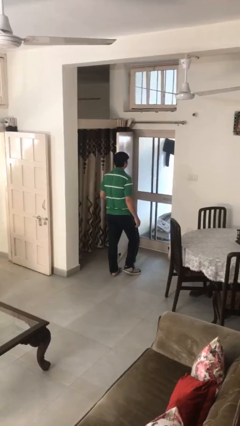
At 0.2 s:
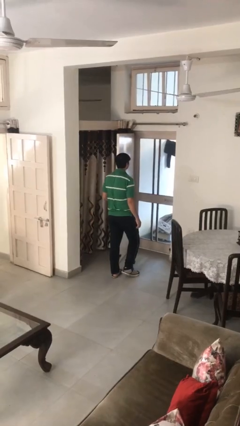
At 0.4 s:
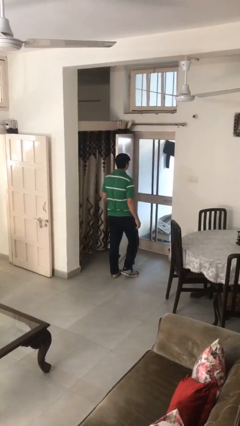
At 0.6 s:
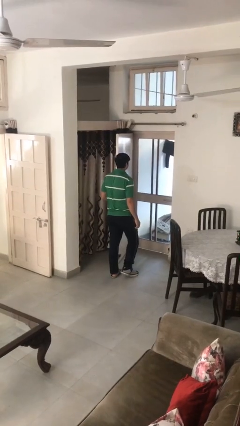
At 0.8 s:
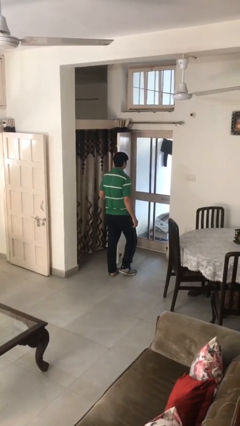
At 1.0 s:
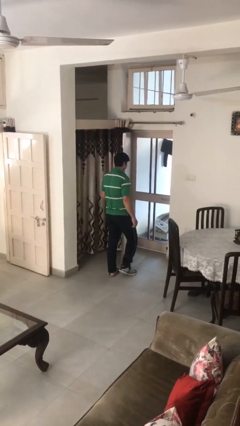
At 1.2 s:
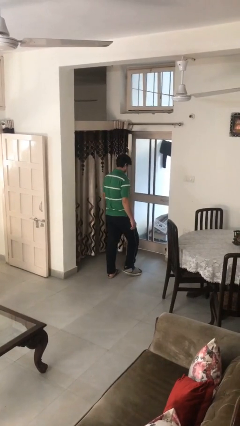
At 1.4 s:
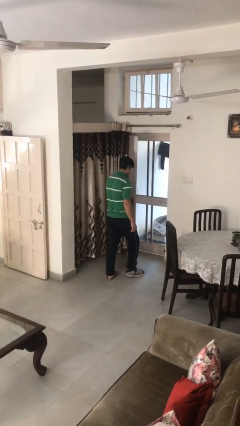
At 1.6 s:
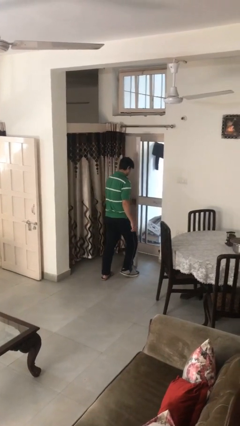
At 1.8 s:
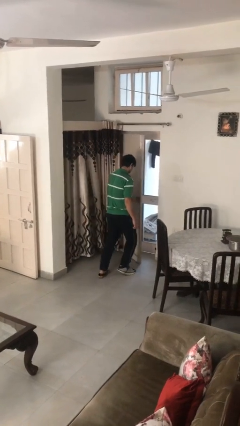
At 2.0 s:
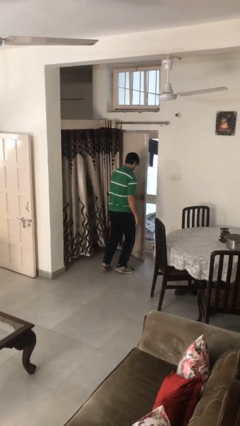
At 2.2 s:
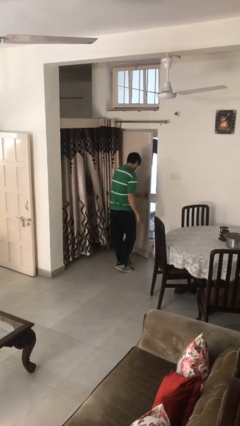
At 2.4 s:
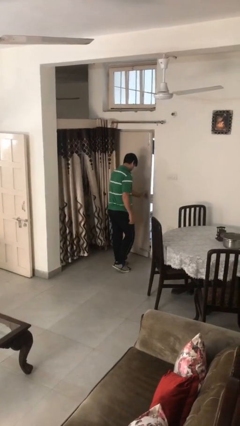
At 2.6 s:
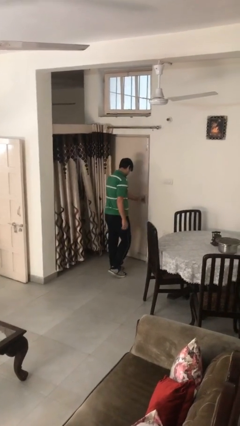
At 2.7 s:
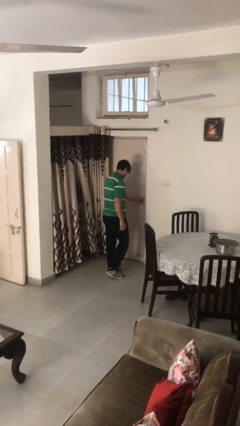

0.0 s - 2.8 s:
person closes facility door

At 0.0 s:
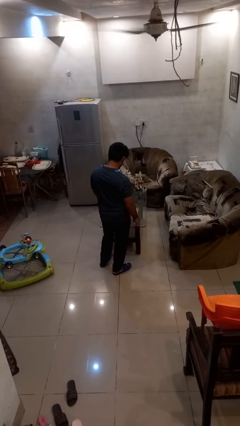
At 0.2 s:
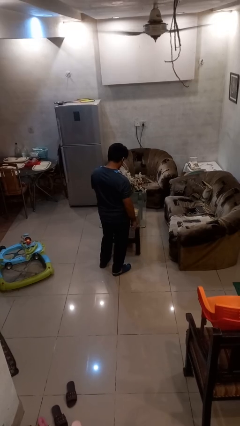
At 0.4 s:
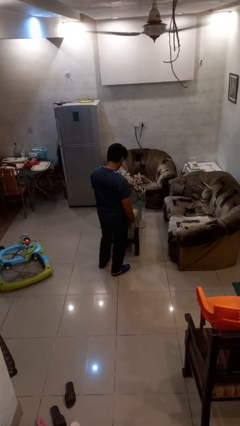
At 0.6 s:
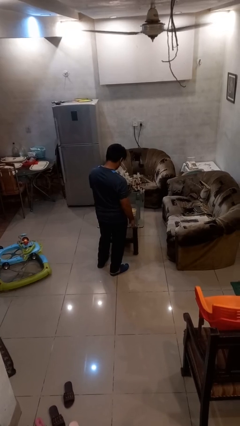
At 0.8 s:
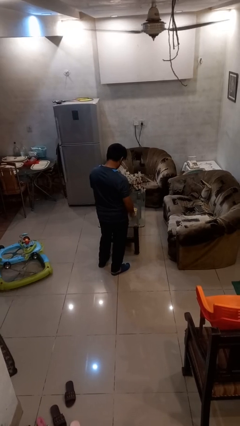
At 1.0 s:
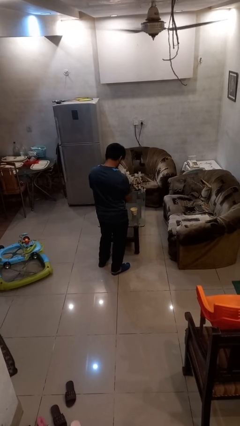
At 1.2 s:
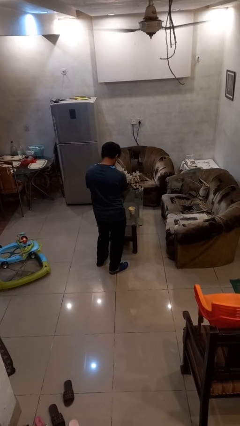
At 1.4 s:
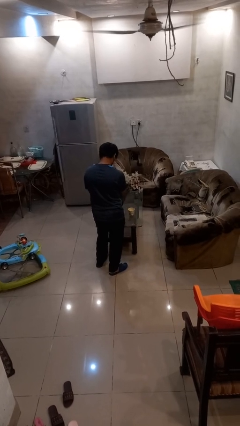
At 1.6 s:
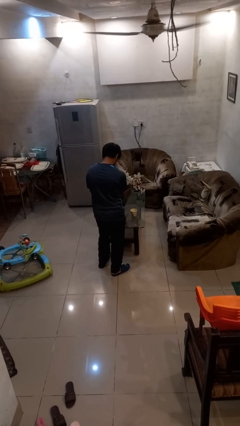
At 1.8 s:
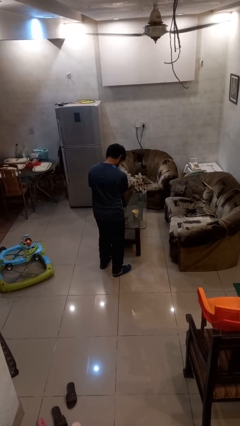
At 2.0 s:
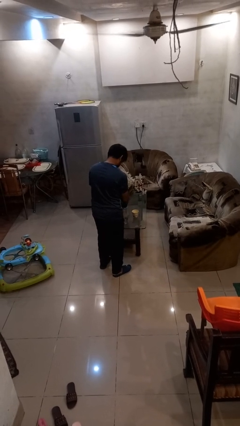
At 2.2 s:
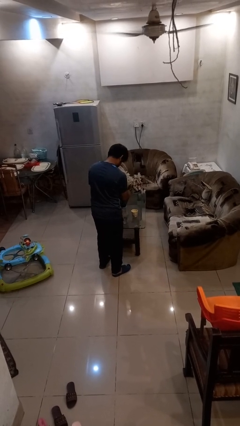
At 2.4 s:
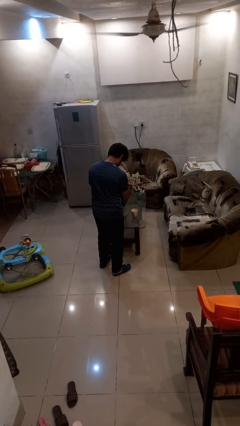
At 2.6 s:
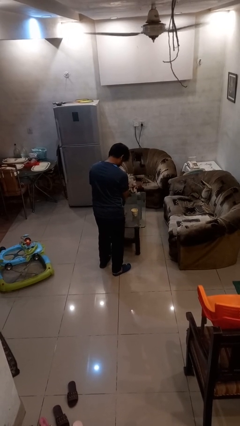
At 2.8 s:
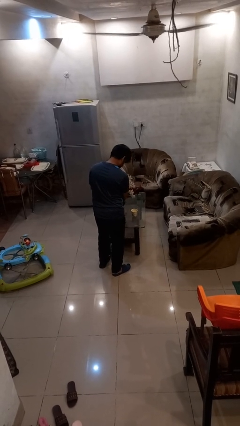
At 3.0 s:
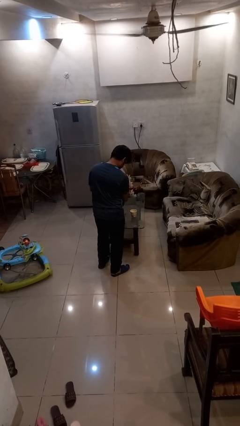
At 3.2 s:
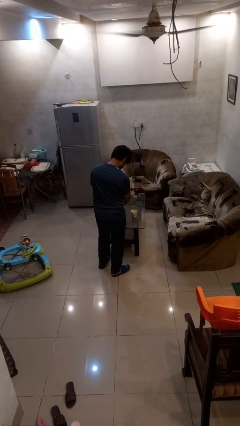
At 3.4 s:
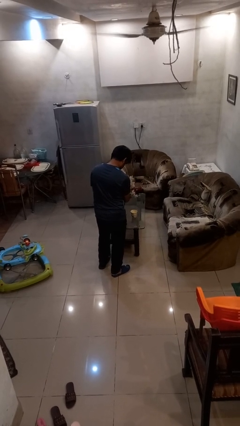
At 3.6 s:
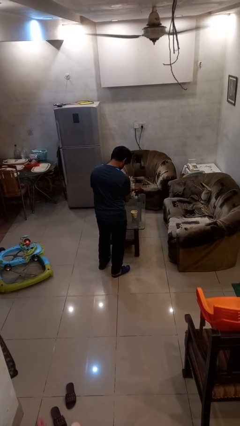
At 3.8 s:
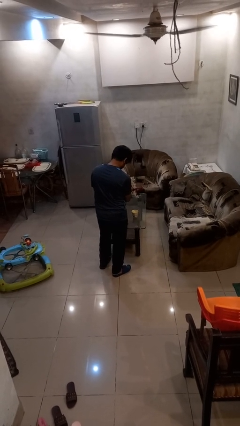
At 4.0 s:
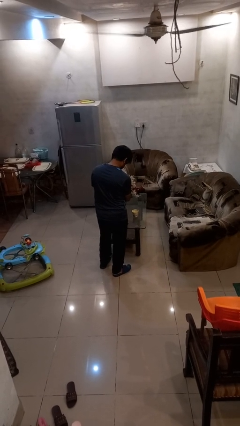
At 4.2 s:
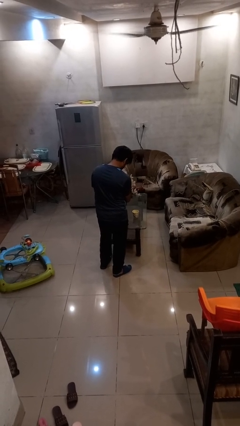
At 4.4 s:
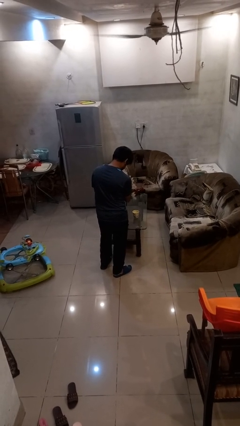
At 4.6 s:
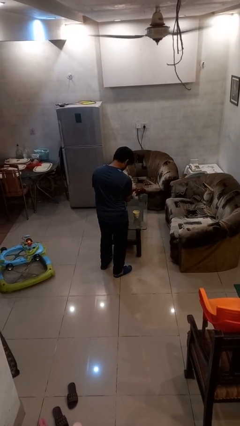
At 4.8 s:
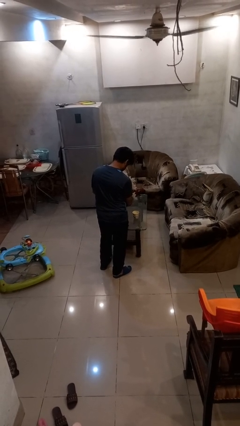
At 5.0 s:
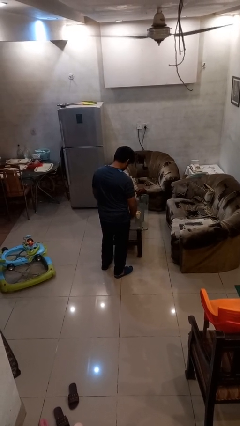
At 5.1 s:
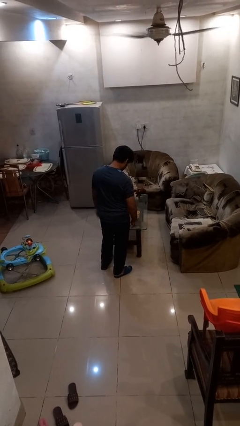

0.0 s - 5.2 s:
person arranges flowers in vase

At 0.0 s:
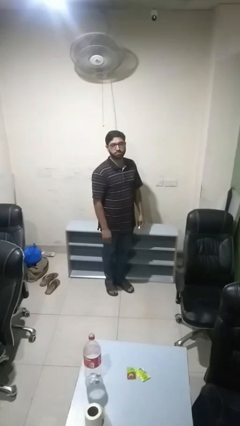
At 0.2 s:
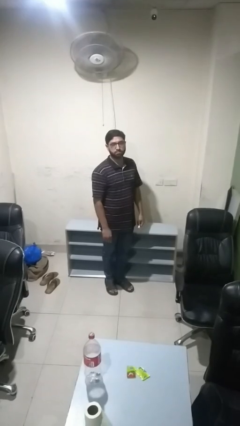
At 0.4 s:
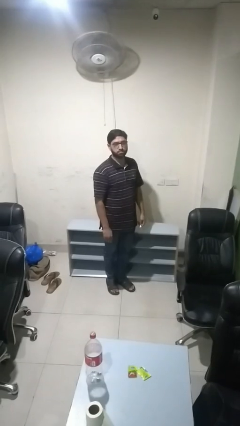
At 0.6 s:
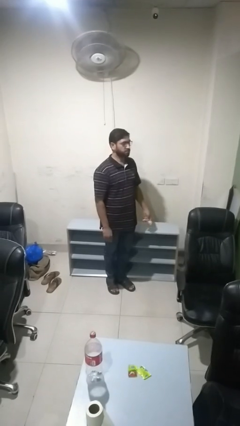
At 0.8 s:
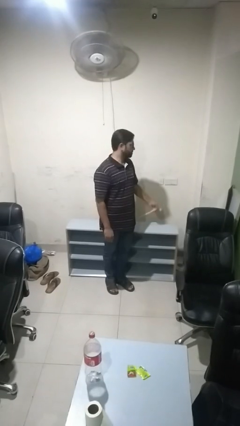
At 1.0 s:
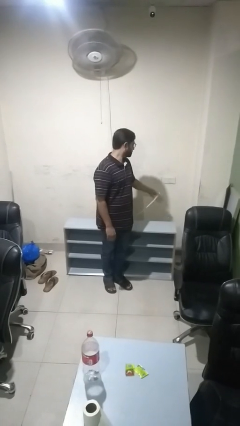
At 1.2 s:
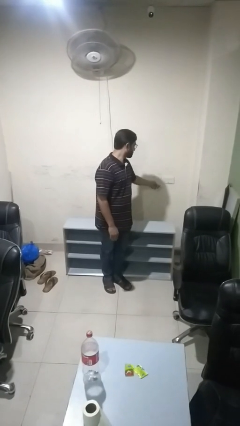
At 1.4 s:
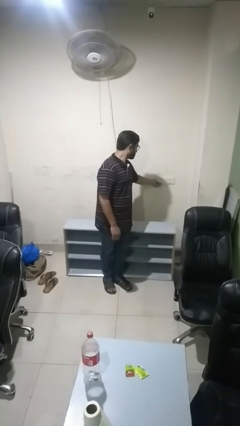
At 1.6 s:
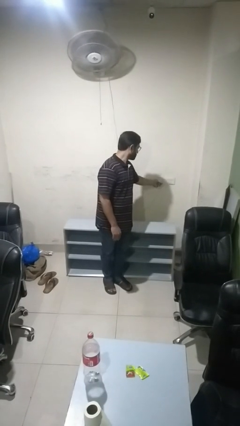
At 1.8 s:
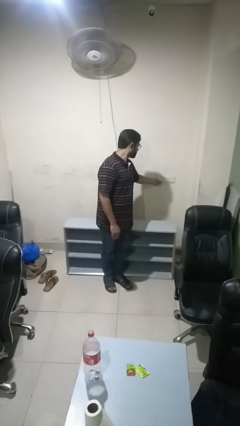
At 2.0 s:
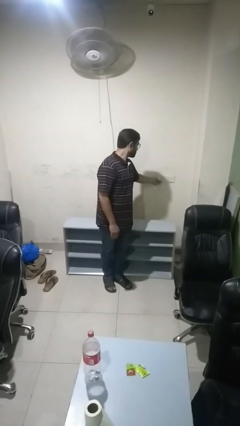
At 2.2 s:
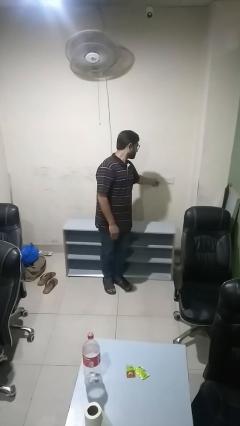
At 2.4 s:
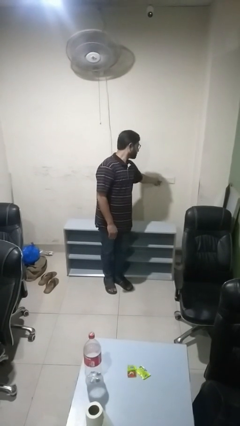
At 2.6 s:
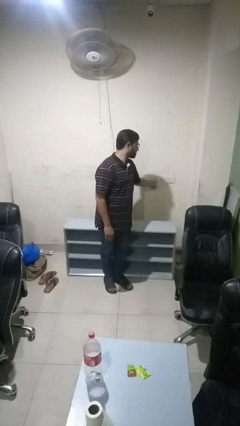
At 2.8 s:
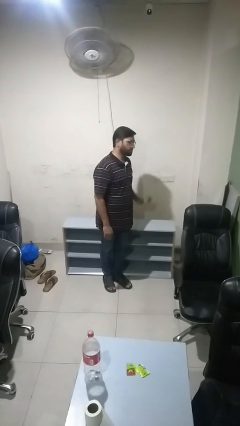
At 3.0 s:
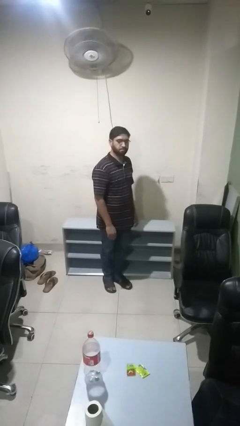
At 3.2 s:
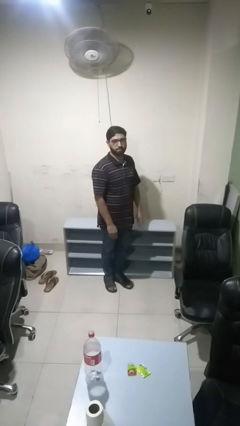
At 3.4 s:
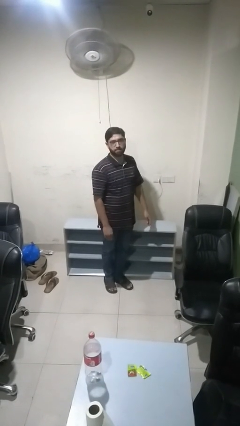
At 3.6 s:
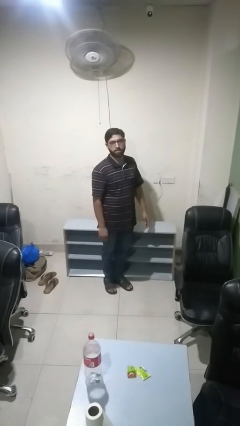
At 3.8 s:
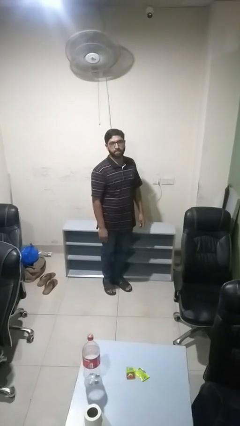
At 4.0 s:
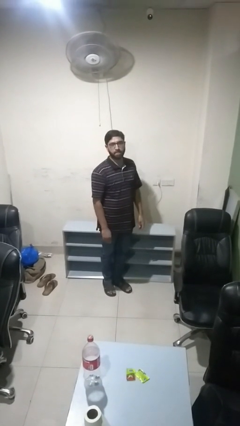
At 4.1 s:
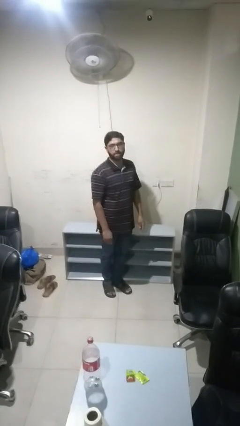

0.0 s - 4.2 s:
person plugs into electrical socket

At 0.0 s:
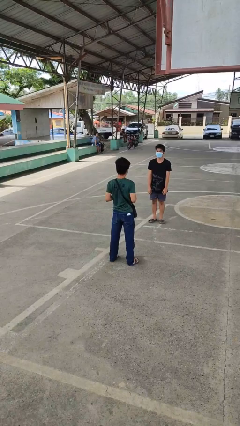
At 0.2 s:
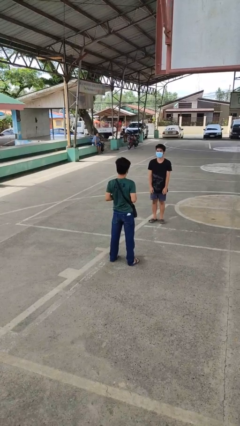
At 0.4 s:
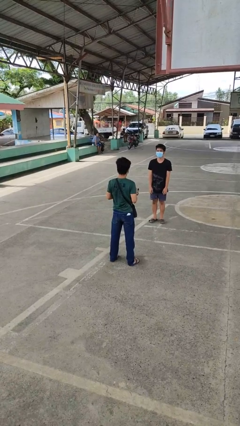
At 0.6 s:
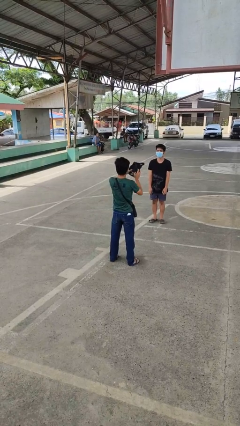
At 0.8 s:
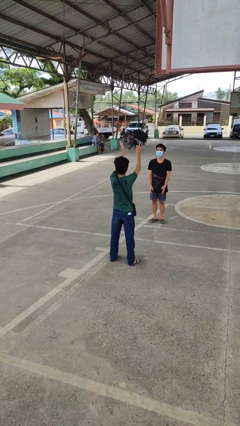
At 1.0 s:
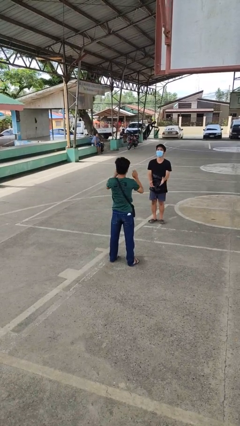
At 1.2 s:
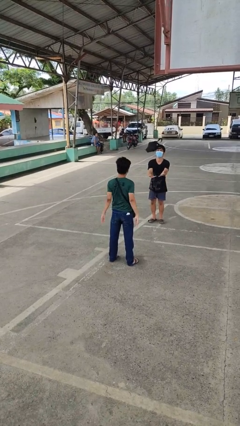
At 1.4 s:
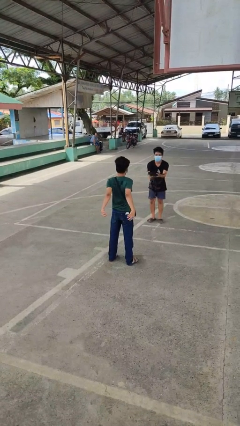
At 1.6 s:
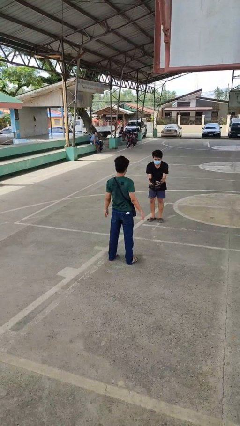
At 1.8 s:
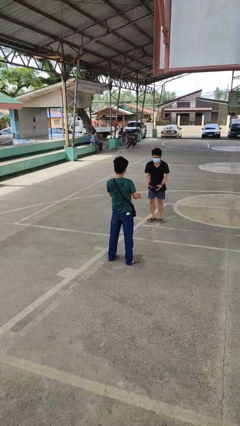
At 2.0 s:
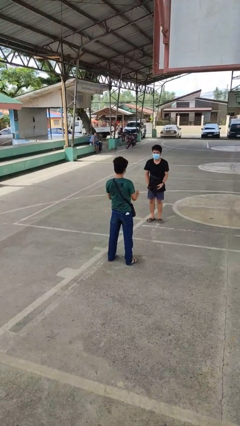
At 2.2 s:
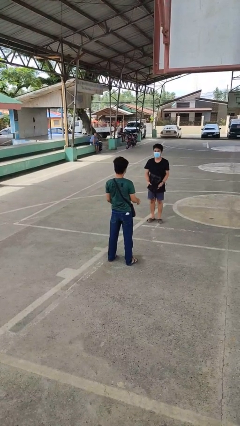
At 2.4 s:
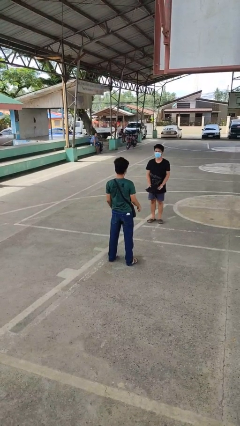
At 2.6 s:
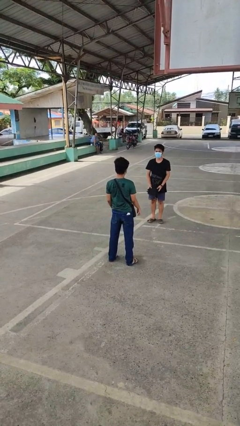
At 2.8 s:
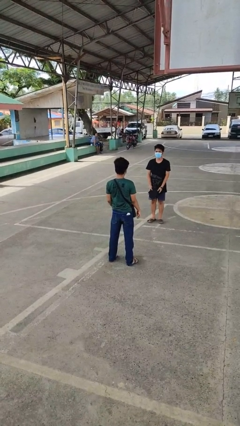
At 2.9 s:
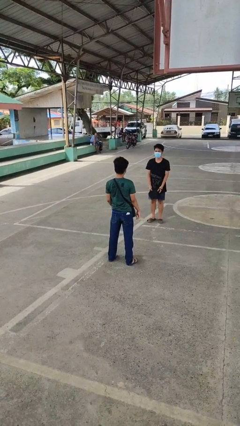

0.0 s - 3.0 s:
person throws object to person

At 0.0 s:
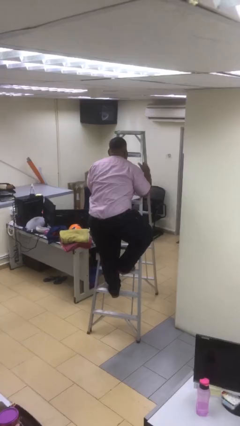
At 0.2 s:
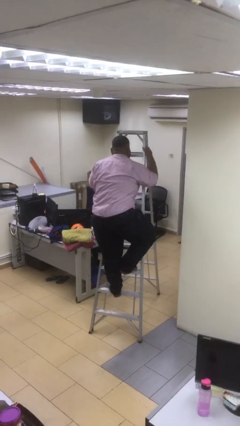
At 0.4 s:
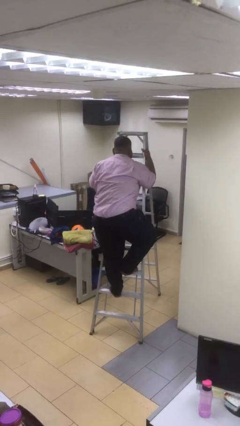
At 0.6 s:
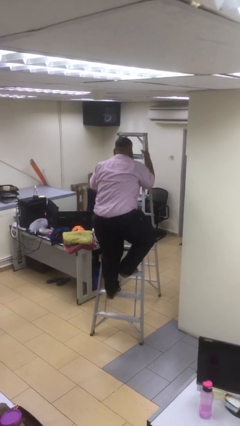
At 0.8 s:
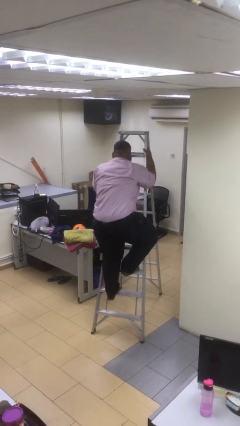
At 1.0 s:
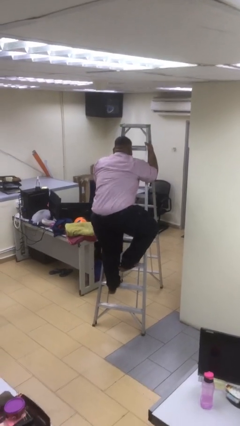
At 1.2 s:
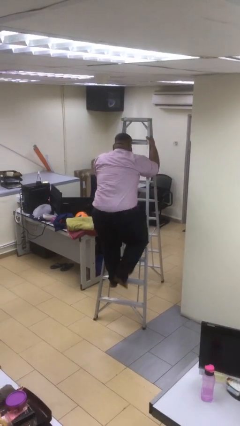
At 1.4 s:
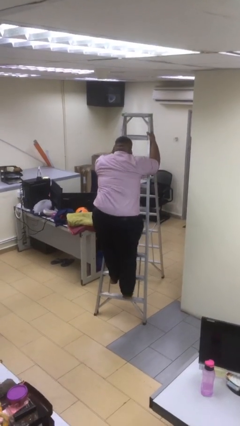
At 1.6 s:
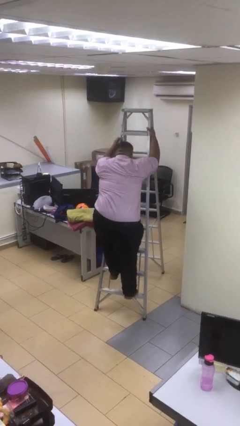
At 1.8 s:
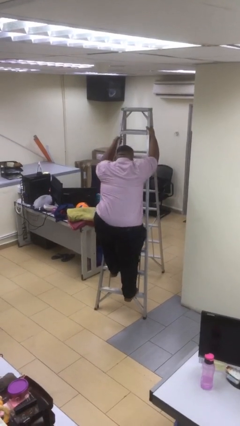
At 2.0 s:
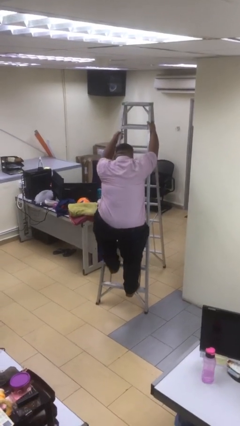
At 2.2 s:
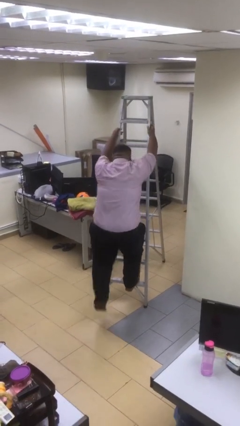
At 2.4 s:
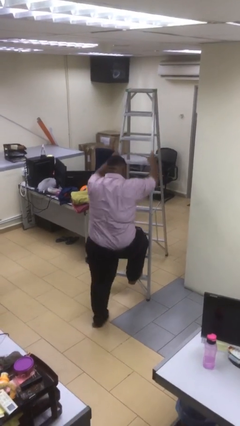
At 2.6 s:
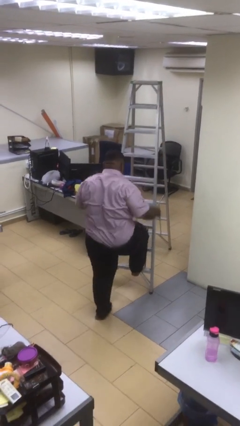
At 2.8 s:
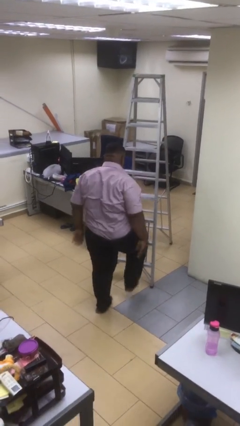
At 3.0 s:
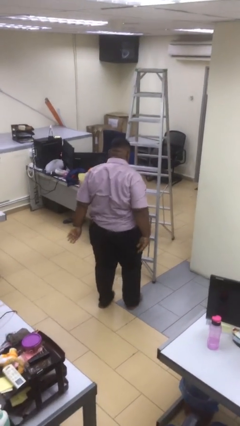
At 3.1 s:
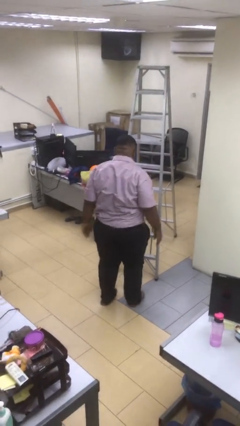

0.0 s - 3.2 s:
person climbs down ladder
